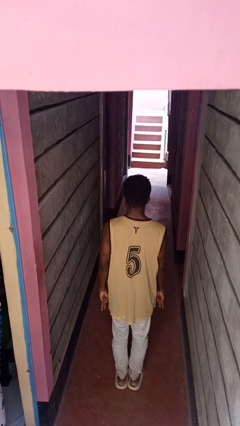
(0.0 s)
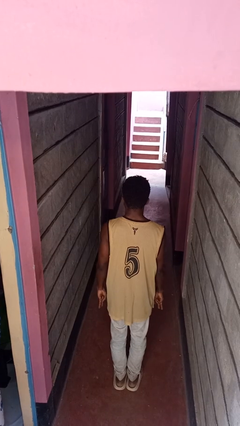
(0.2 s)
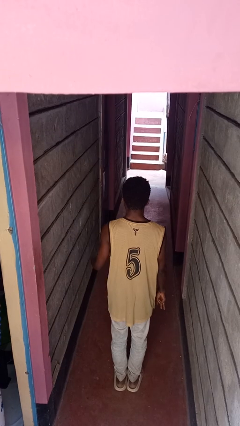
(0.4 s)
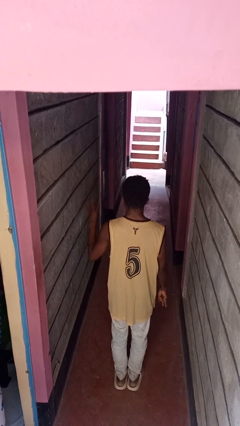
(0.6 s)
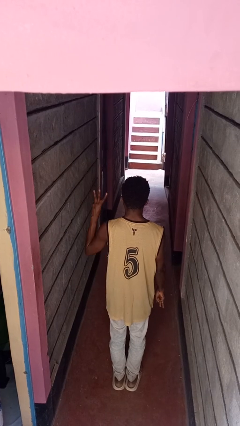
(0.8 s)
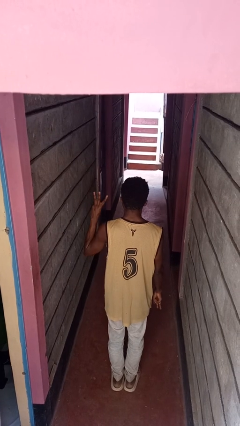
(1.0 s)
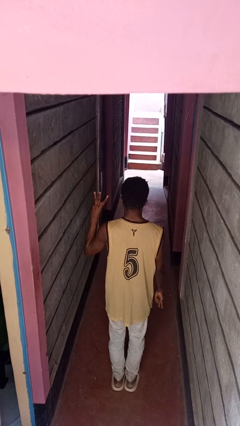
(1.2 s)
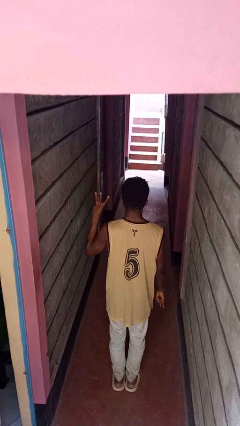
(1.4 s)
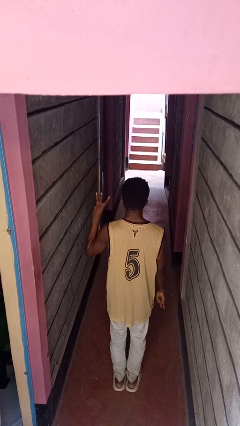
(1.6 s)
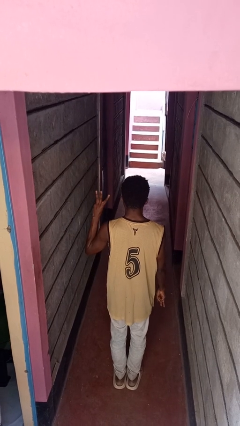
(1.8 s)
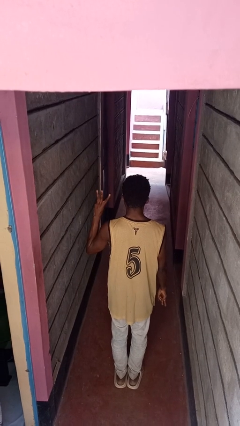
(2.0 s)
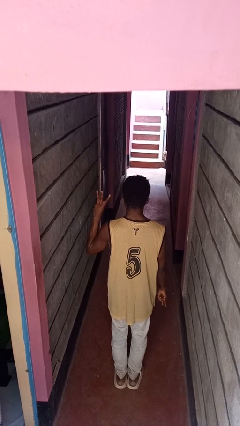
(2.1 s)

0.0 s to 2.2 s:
person gestures number three

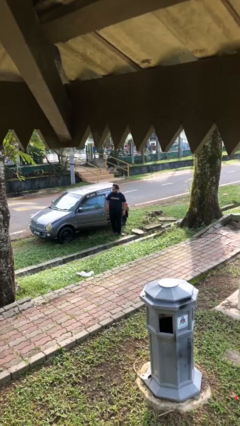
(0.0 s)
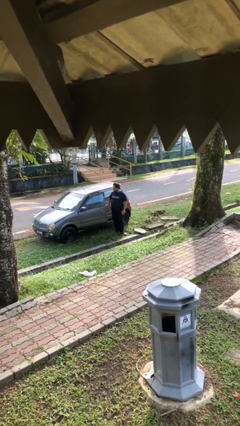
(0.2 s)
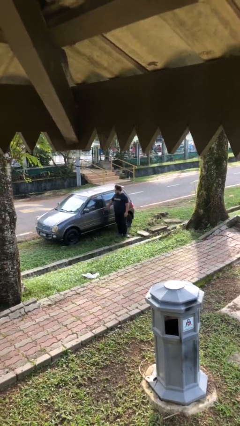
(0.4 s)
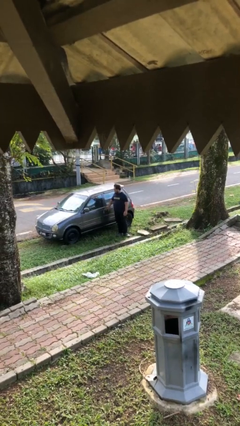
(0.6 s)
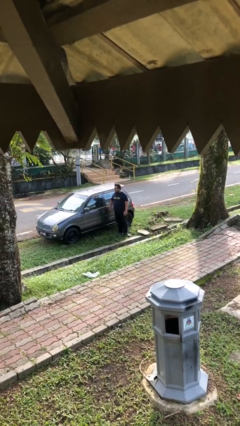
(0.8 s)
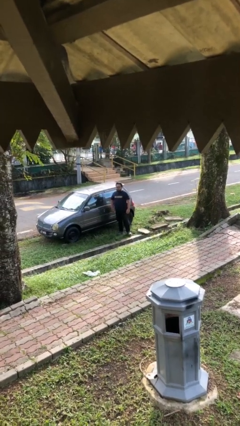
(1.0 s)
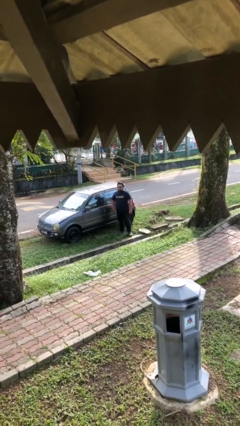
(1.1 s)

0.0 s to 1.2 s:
person closes car door

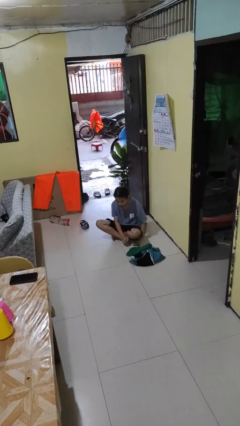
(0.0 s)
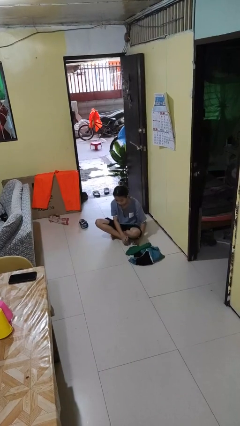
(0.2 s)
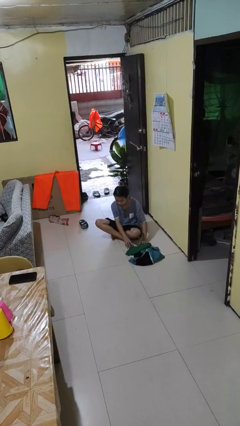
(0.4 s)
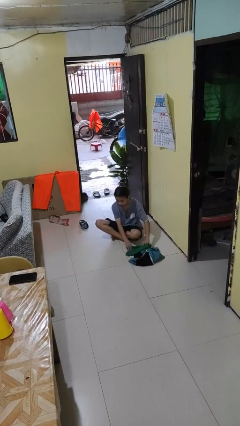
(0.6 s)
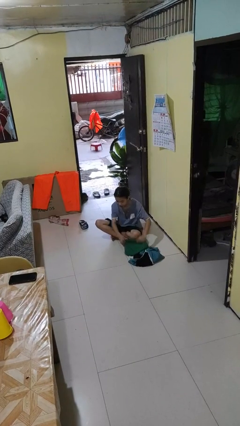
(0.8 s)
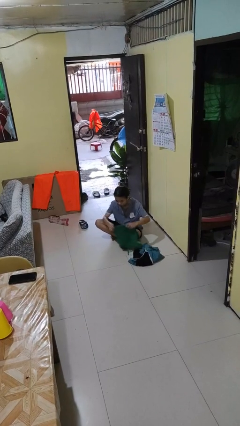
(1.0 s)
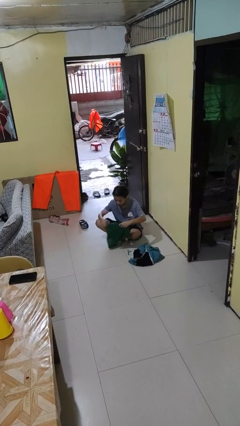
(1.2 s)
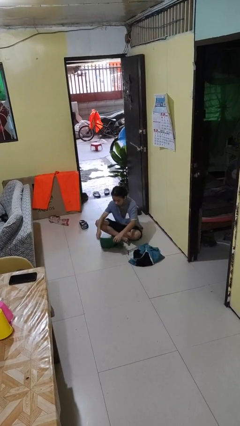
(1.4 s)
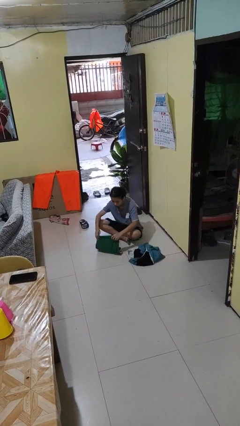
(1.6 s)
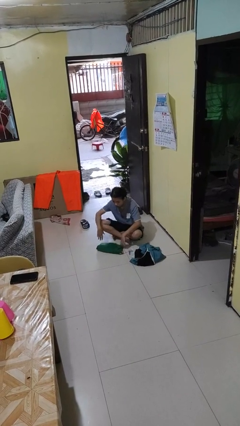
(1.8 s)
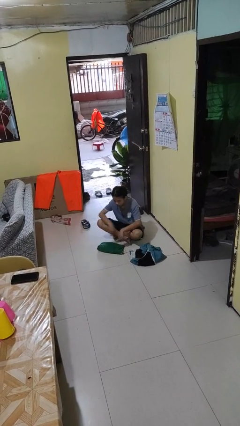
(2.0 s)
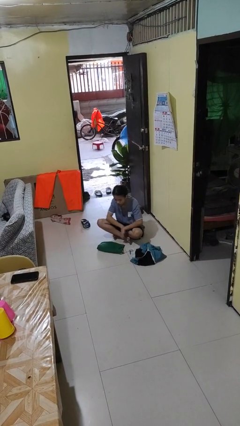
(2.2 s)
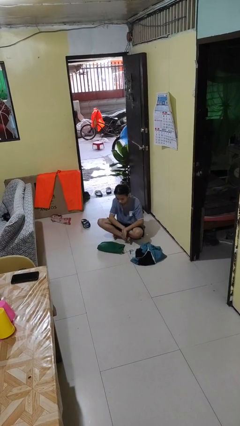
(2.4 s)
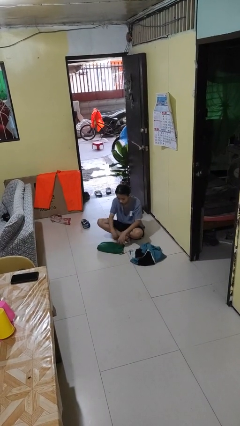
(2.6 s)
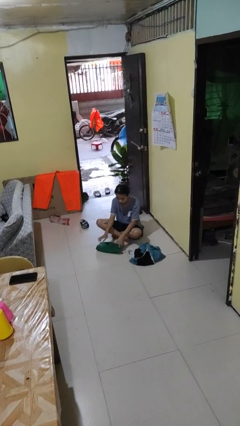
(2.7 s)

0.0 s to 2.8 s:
person folds shirt

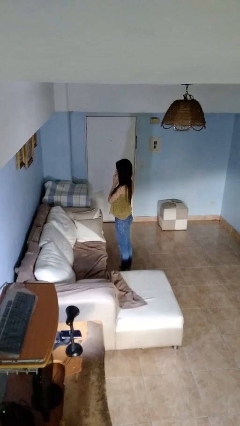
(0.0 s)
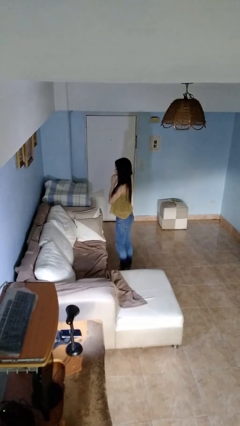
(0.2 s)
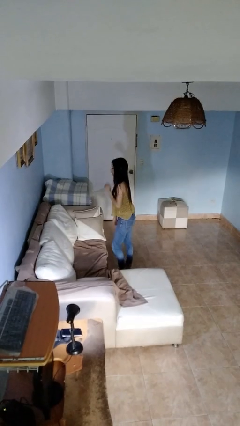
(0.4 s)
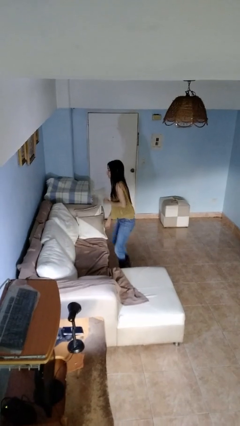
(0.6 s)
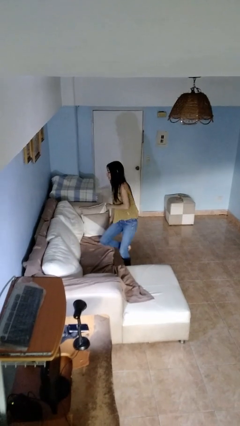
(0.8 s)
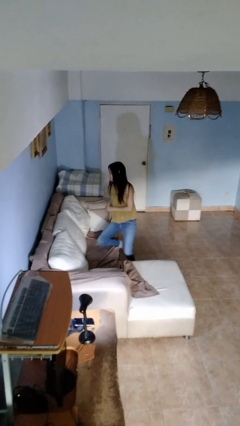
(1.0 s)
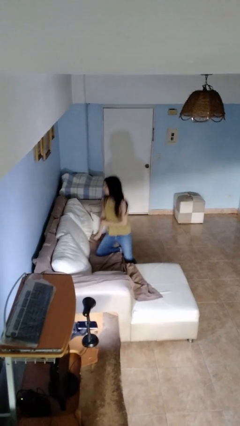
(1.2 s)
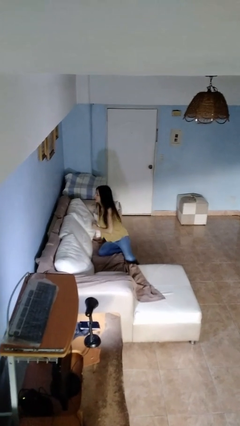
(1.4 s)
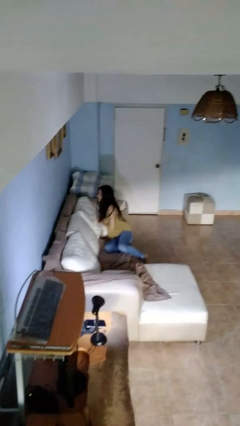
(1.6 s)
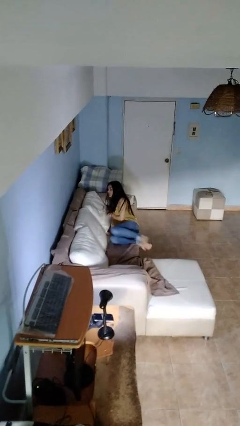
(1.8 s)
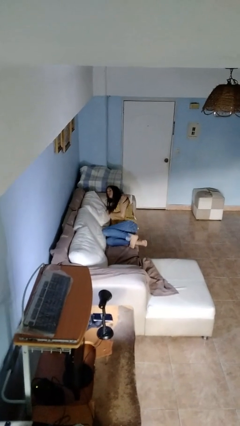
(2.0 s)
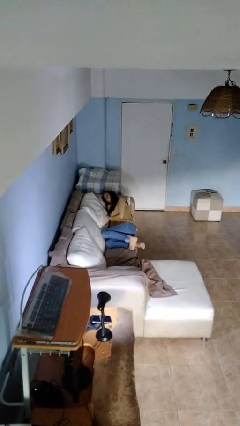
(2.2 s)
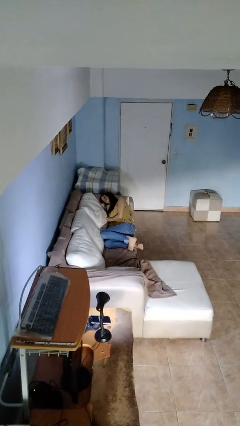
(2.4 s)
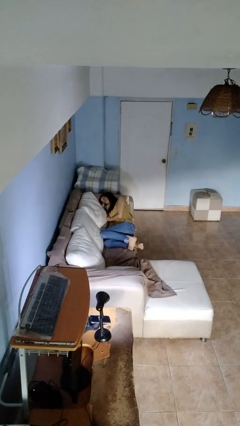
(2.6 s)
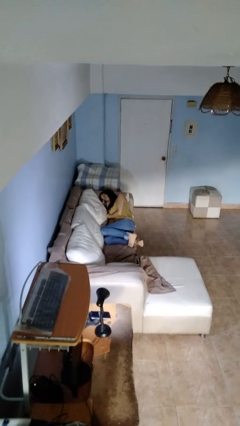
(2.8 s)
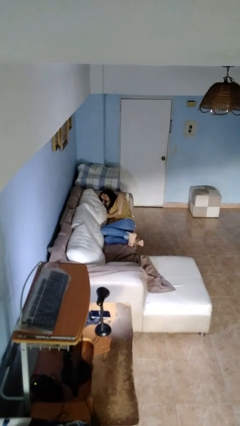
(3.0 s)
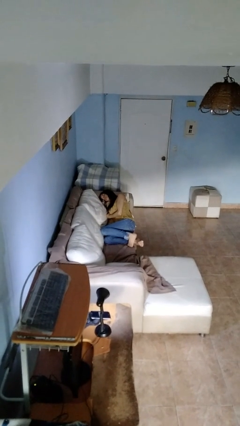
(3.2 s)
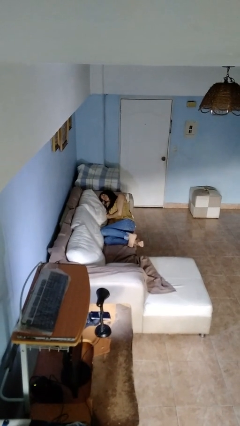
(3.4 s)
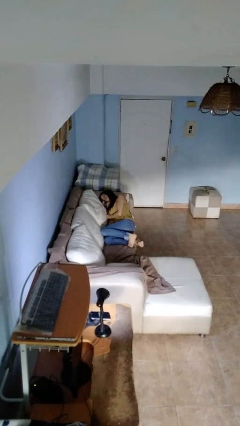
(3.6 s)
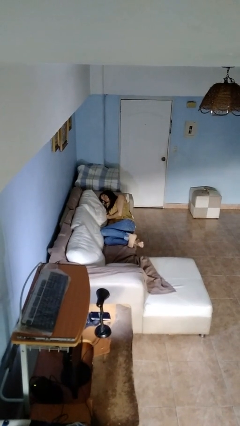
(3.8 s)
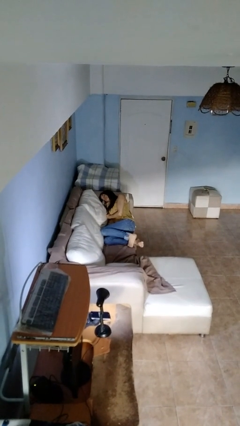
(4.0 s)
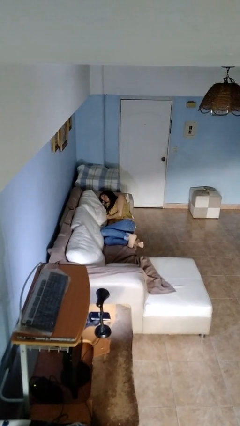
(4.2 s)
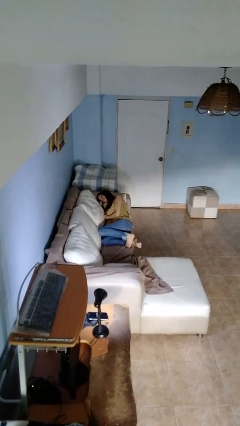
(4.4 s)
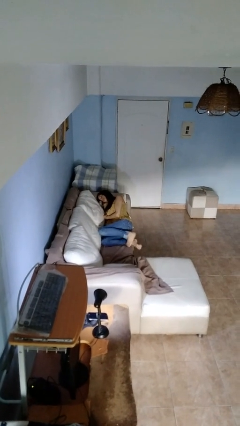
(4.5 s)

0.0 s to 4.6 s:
person lies down on couch

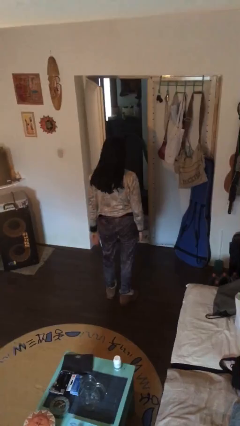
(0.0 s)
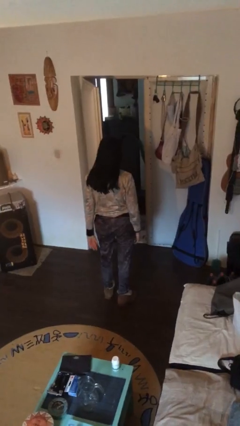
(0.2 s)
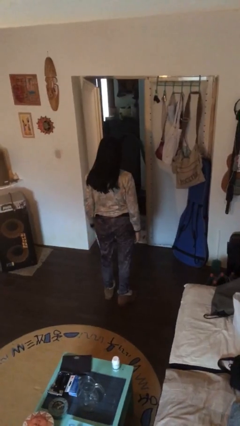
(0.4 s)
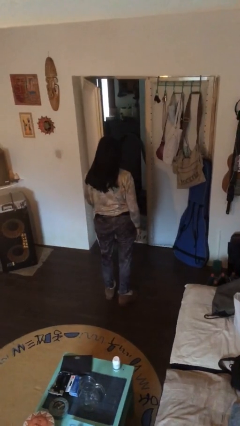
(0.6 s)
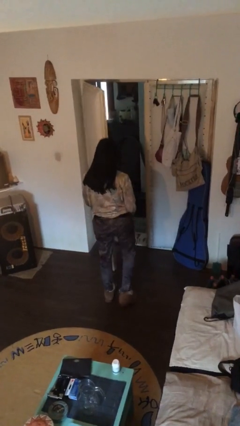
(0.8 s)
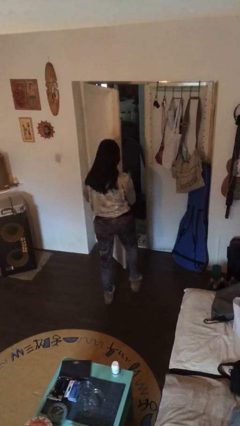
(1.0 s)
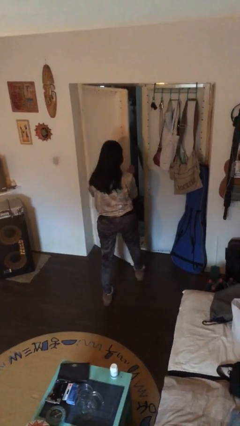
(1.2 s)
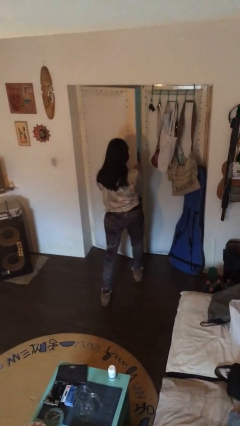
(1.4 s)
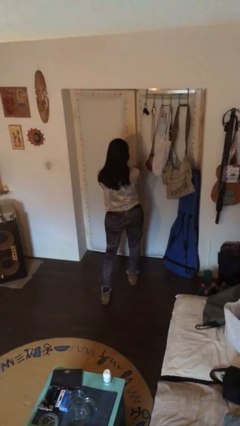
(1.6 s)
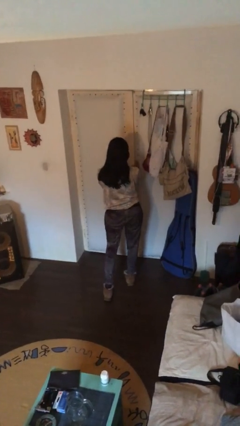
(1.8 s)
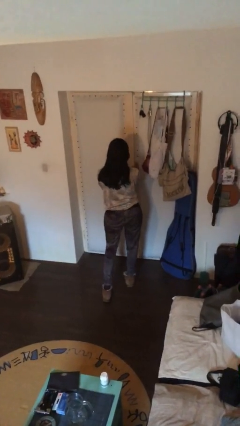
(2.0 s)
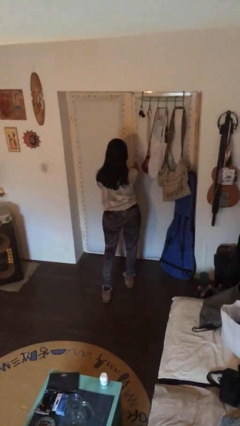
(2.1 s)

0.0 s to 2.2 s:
person closes facility door

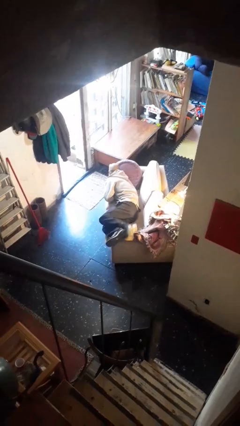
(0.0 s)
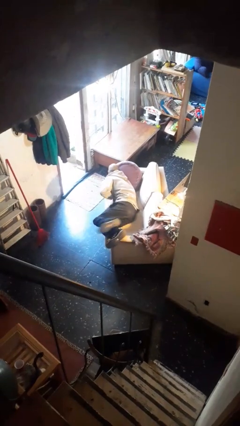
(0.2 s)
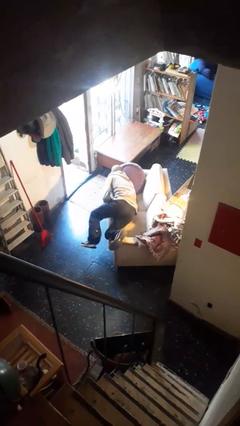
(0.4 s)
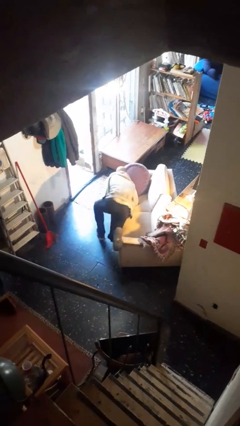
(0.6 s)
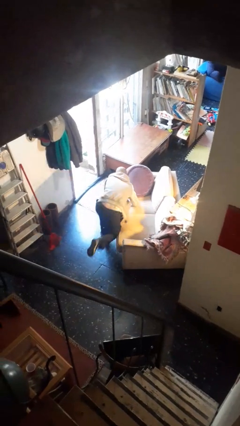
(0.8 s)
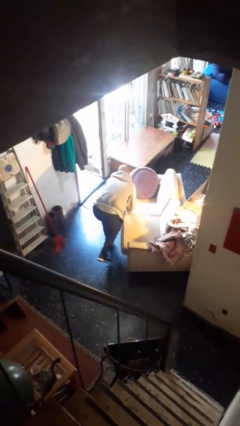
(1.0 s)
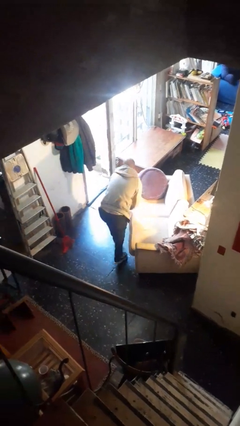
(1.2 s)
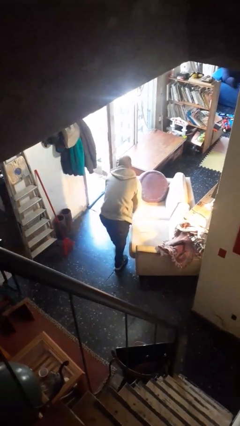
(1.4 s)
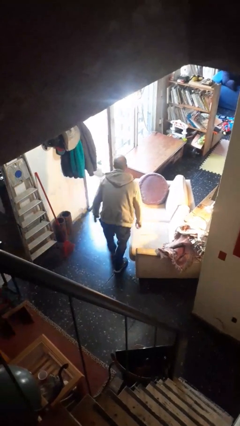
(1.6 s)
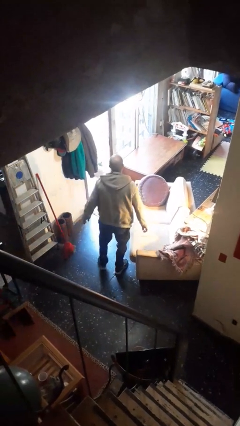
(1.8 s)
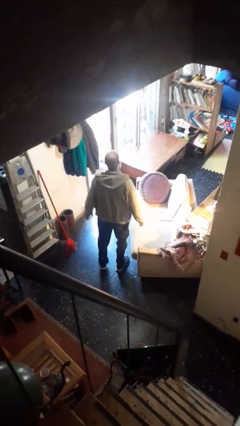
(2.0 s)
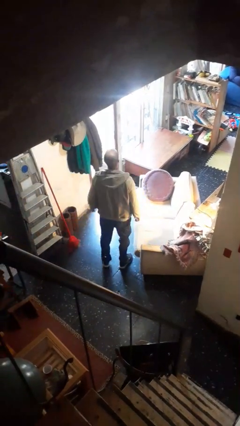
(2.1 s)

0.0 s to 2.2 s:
person stands up

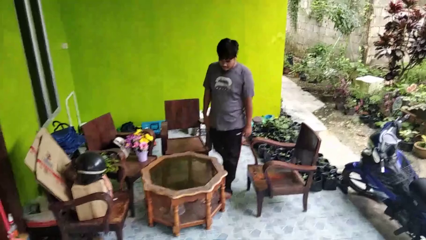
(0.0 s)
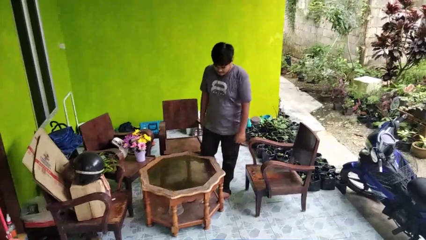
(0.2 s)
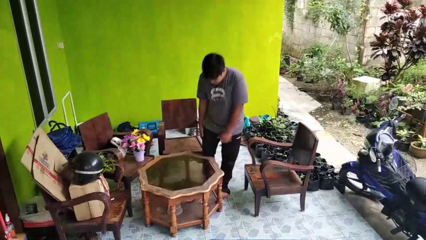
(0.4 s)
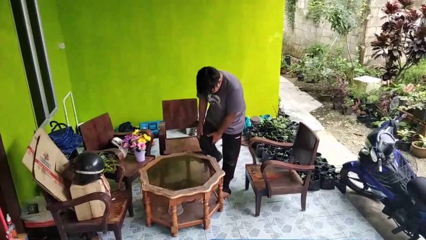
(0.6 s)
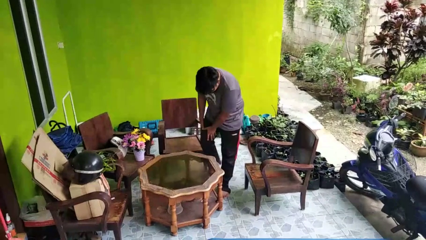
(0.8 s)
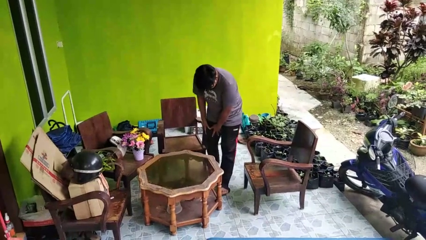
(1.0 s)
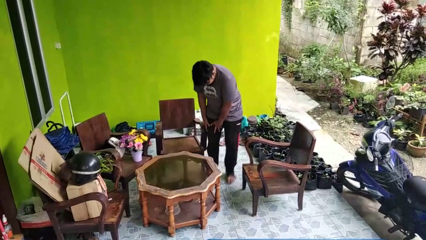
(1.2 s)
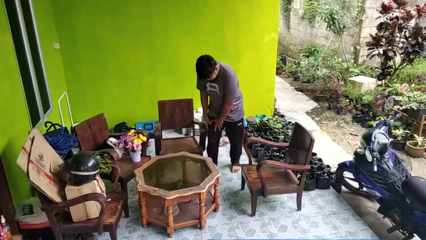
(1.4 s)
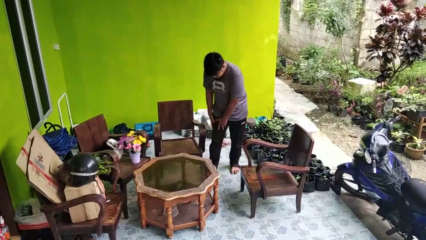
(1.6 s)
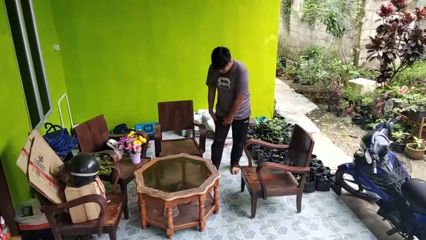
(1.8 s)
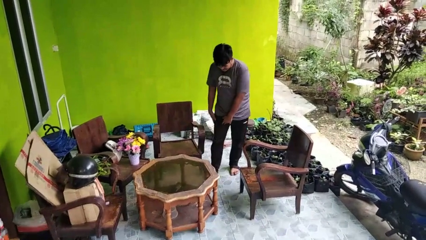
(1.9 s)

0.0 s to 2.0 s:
person bumps into table

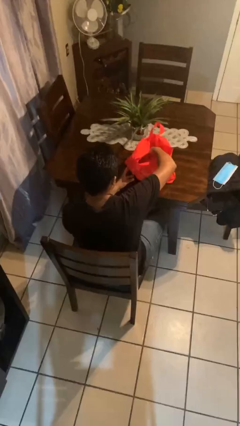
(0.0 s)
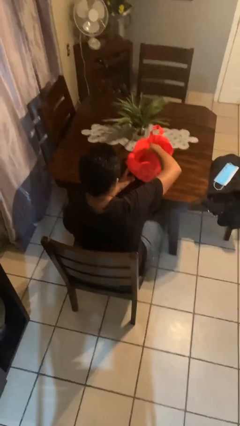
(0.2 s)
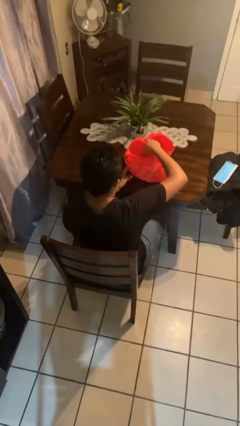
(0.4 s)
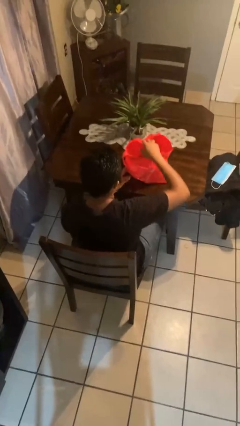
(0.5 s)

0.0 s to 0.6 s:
person puts object into bag
